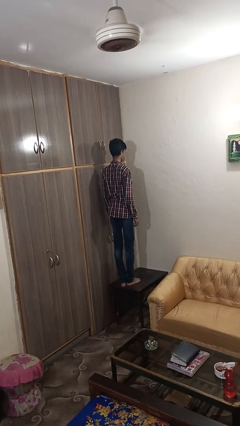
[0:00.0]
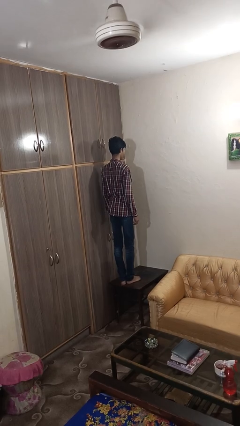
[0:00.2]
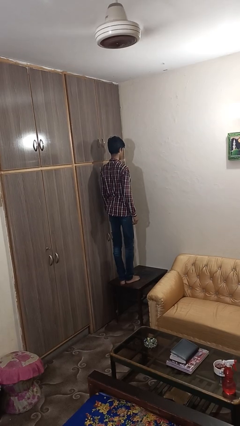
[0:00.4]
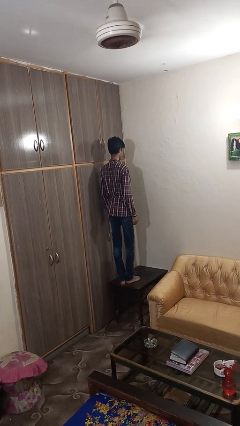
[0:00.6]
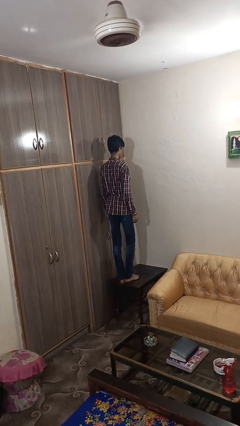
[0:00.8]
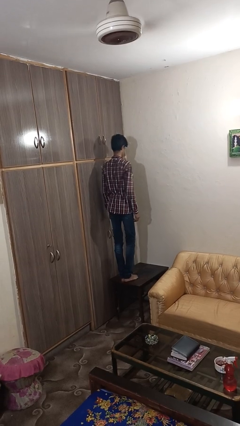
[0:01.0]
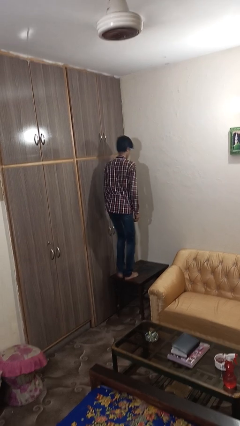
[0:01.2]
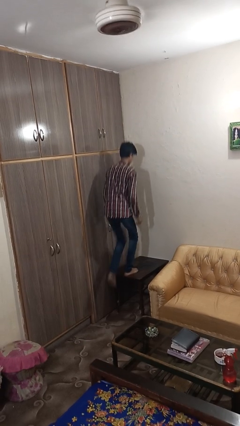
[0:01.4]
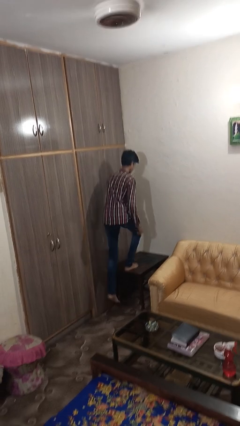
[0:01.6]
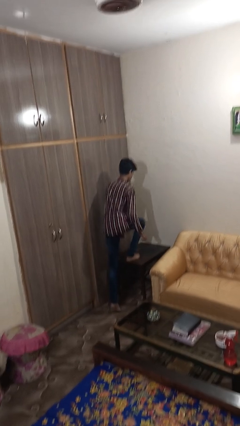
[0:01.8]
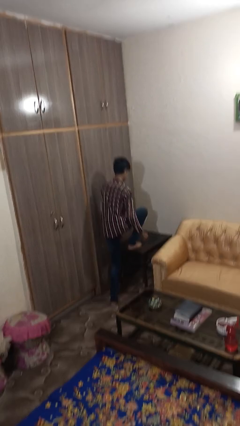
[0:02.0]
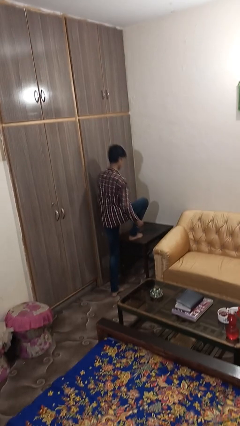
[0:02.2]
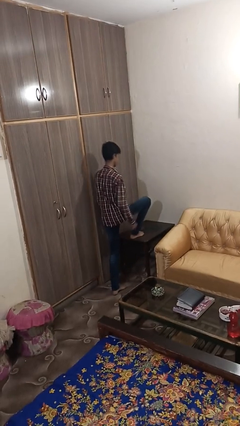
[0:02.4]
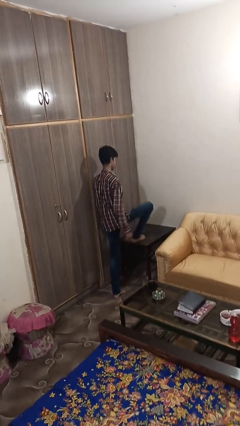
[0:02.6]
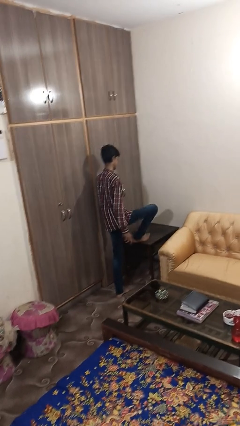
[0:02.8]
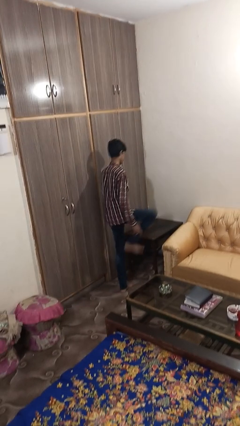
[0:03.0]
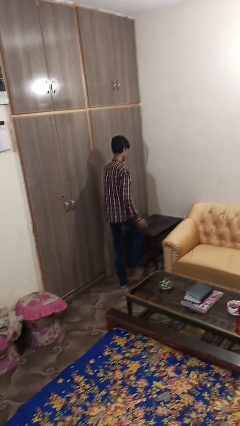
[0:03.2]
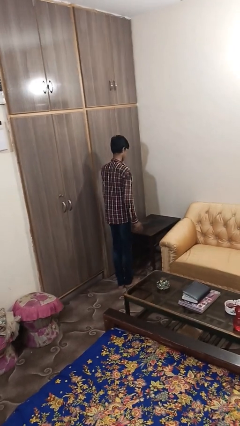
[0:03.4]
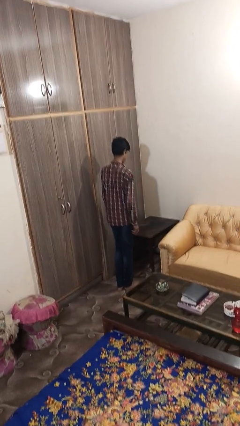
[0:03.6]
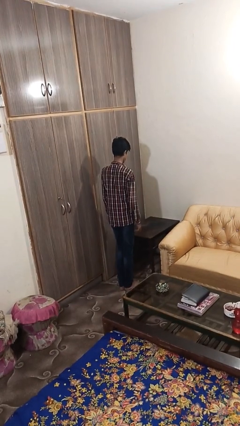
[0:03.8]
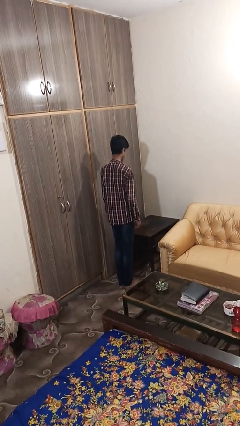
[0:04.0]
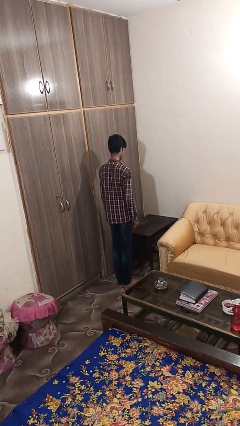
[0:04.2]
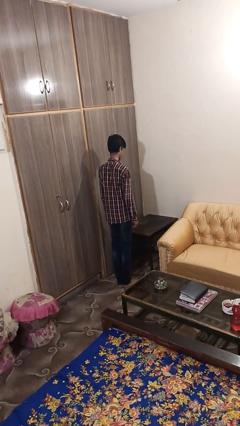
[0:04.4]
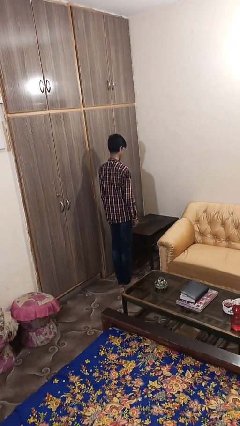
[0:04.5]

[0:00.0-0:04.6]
person climbs off table

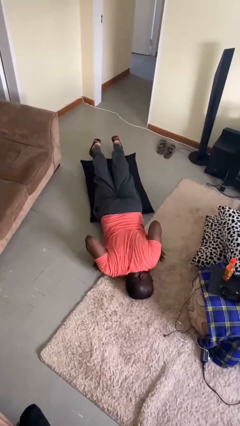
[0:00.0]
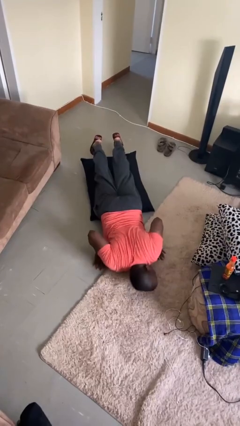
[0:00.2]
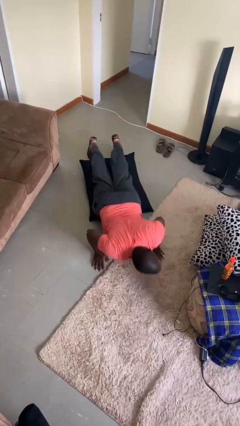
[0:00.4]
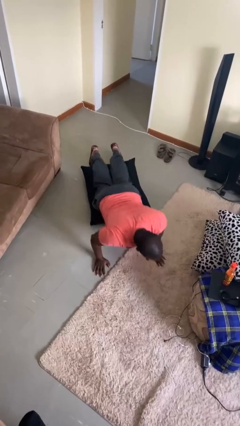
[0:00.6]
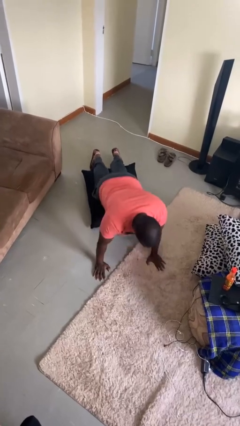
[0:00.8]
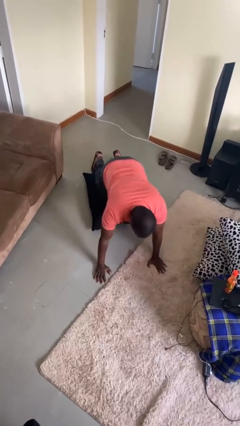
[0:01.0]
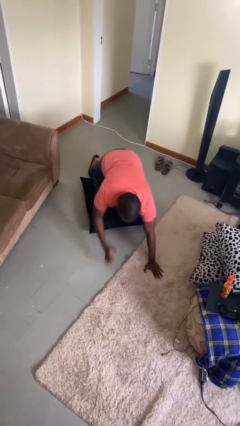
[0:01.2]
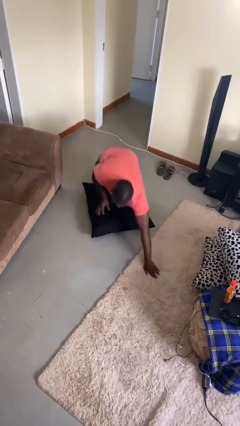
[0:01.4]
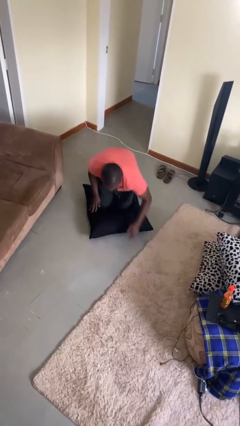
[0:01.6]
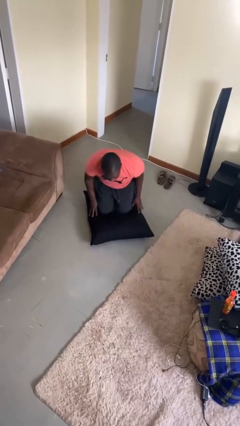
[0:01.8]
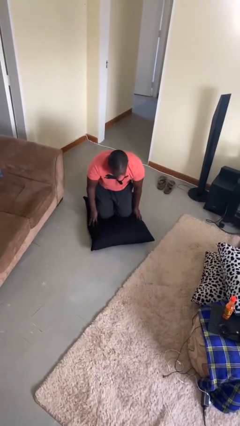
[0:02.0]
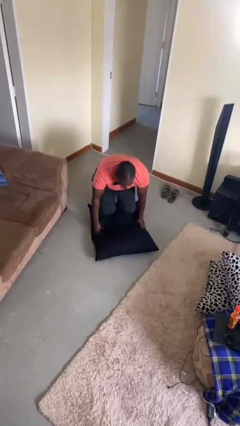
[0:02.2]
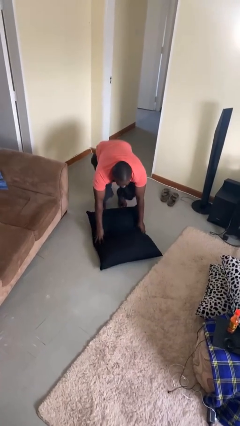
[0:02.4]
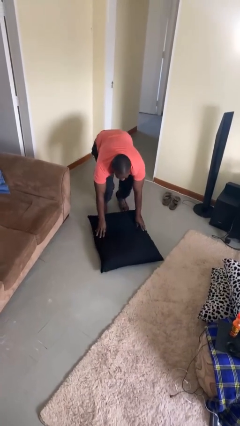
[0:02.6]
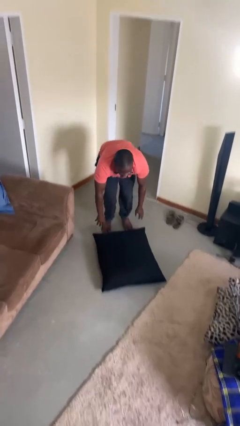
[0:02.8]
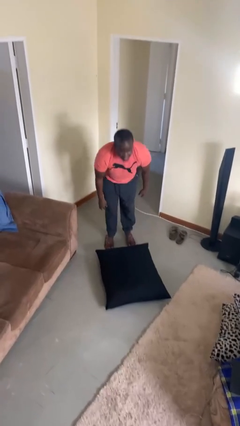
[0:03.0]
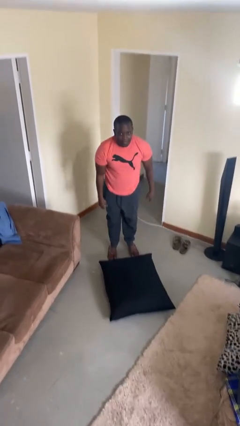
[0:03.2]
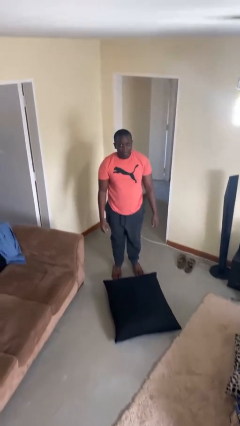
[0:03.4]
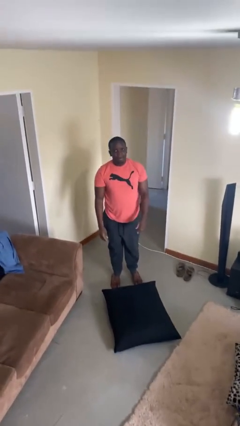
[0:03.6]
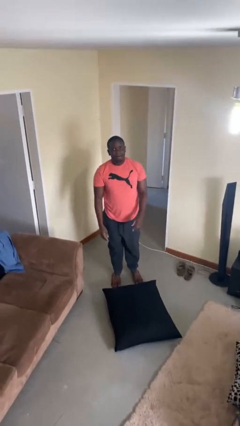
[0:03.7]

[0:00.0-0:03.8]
person stands up from floor

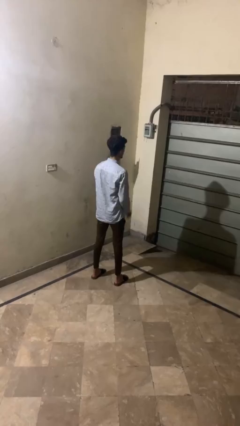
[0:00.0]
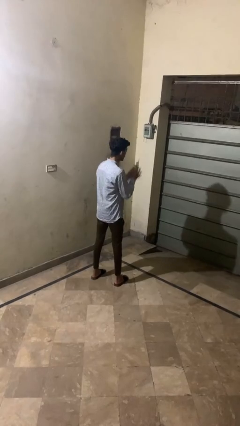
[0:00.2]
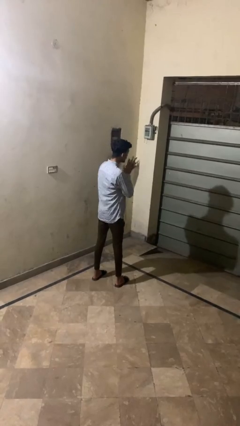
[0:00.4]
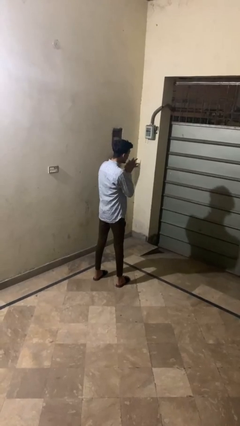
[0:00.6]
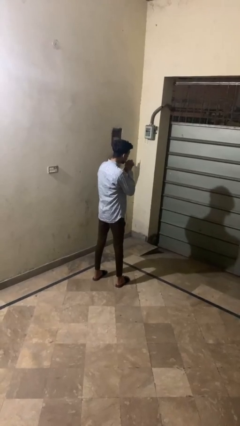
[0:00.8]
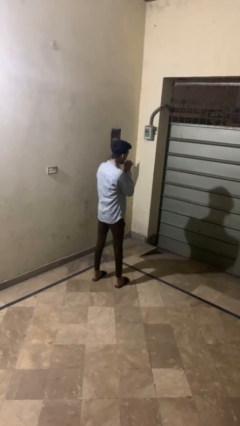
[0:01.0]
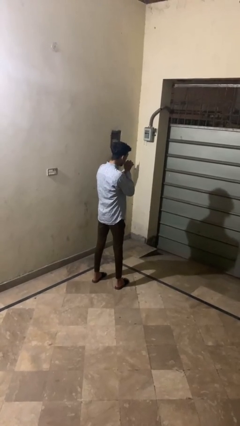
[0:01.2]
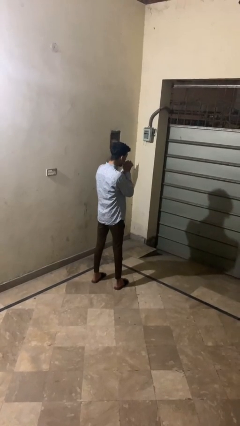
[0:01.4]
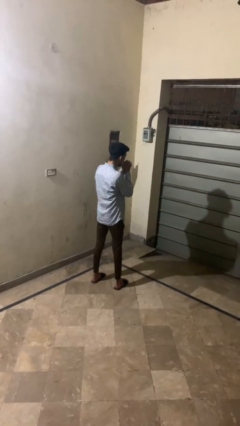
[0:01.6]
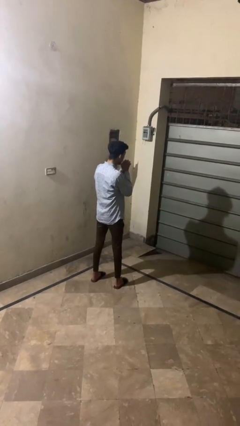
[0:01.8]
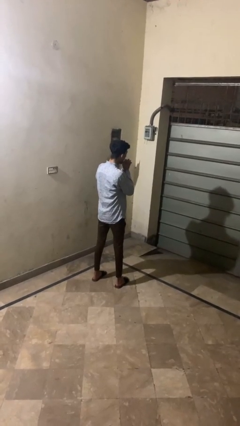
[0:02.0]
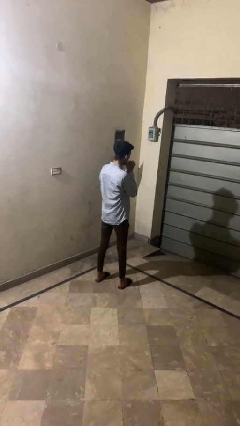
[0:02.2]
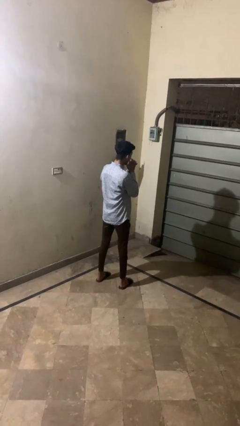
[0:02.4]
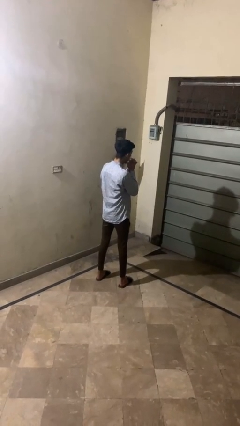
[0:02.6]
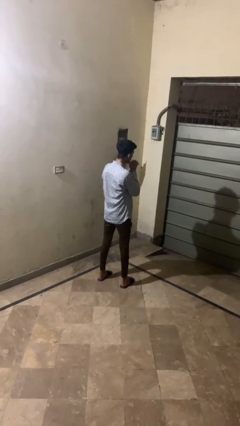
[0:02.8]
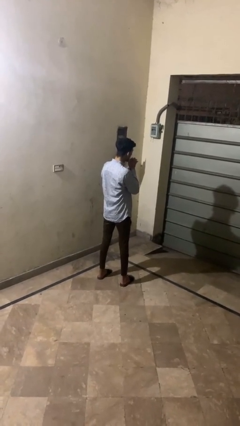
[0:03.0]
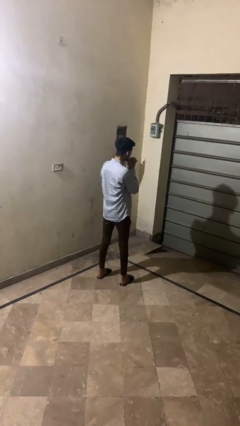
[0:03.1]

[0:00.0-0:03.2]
person blows into hands

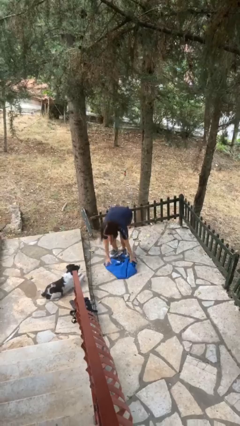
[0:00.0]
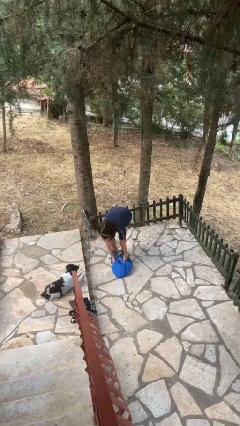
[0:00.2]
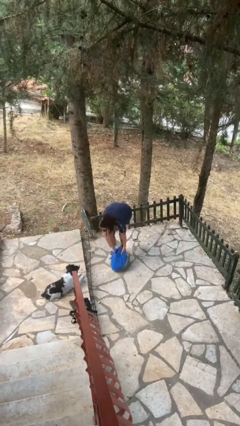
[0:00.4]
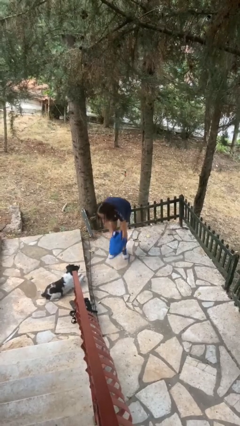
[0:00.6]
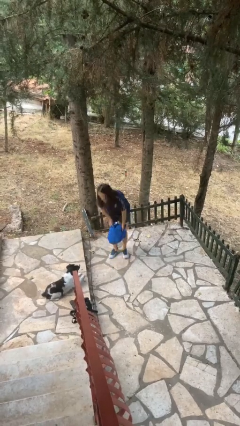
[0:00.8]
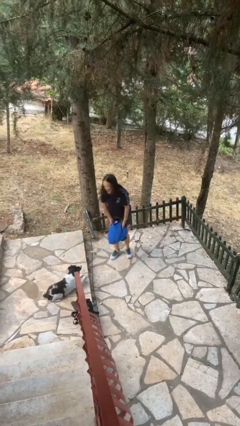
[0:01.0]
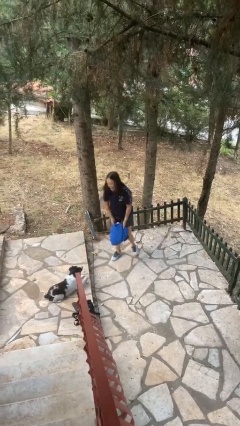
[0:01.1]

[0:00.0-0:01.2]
person picks up object from floor

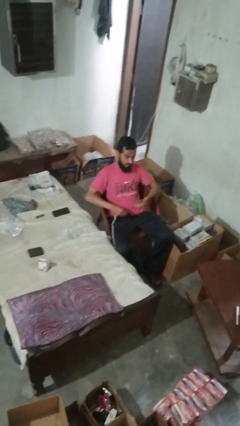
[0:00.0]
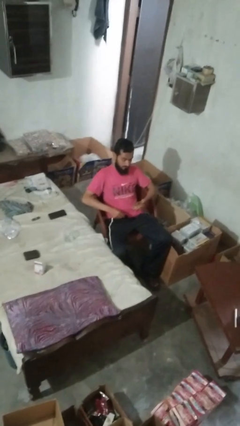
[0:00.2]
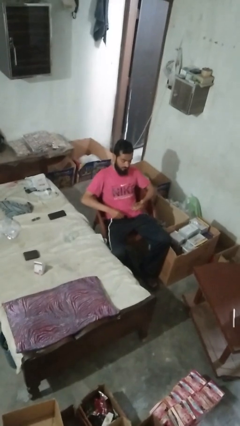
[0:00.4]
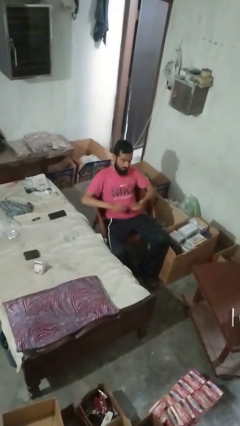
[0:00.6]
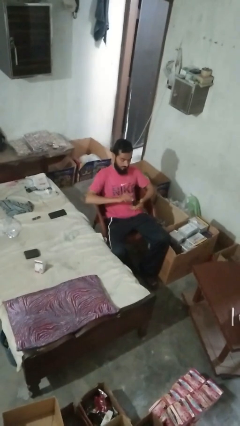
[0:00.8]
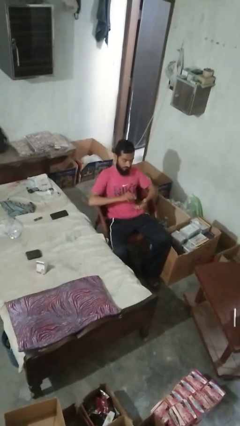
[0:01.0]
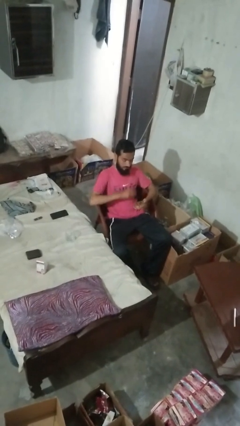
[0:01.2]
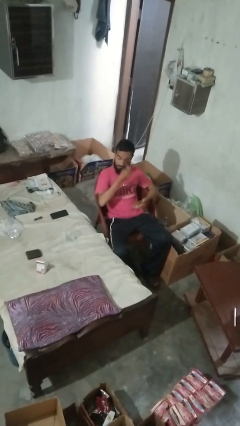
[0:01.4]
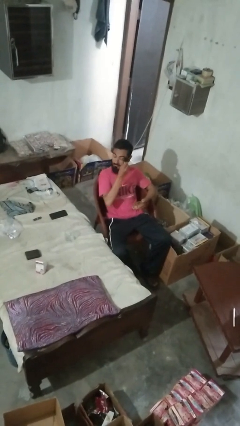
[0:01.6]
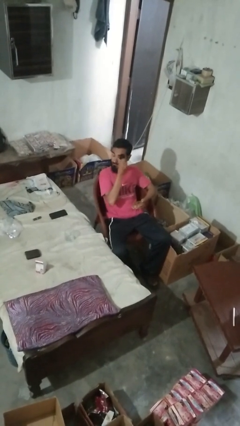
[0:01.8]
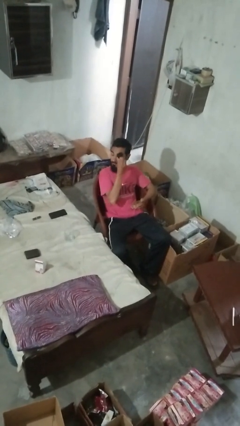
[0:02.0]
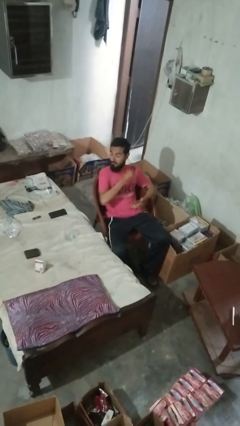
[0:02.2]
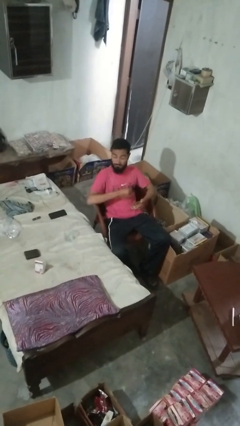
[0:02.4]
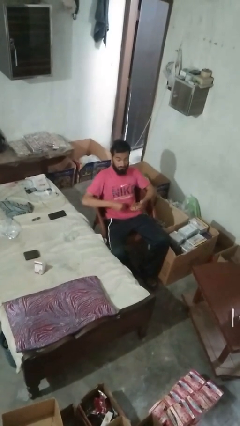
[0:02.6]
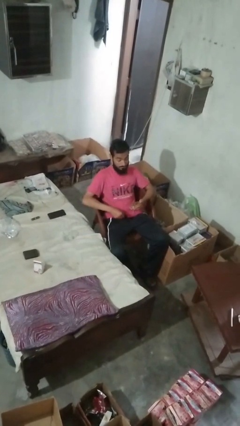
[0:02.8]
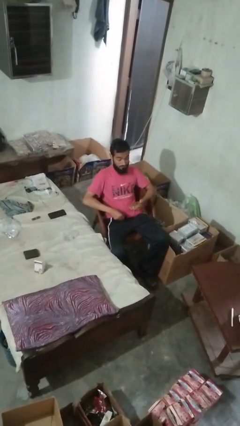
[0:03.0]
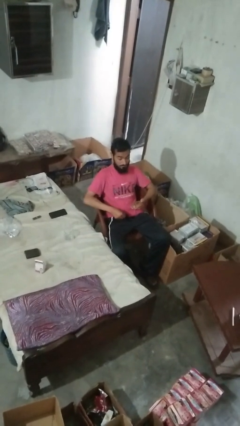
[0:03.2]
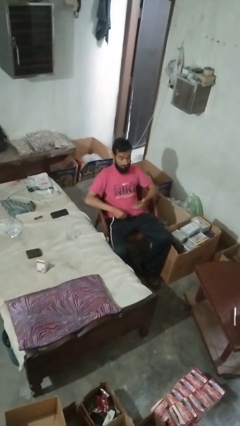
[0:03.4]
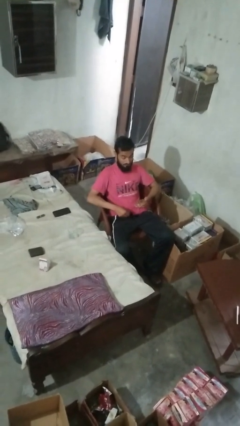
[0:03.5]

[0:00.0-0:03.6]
person applies eye makeup

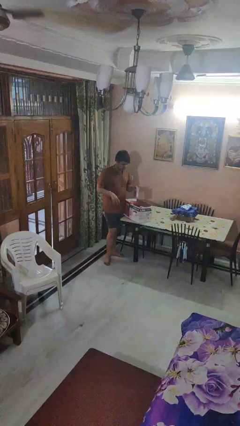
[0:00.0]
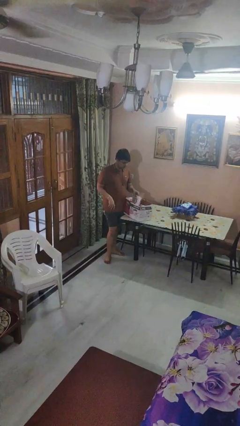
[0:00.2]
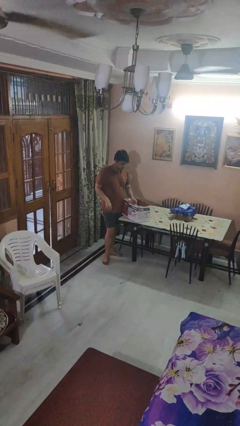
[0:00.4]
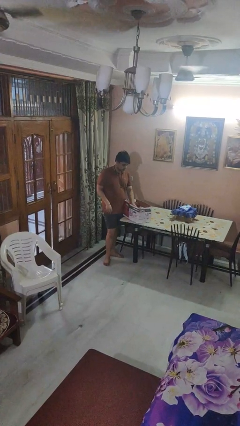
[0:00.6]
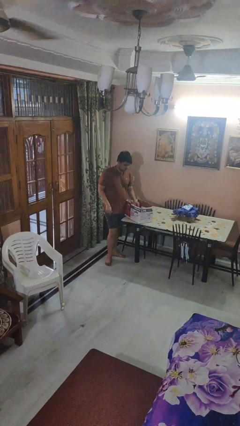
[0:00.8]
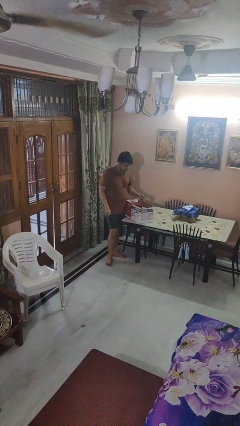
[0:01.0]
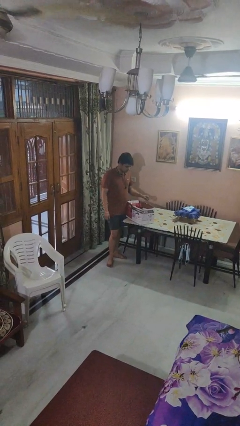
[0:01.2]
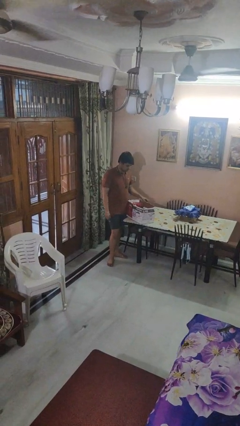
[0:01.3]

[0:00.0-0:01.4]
person puts object into box
